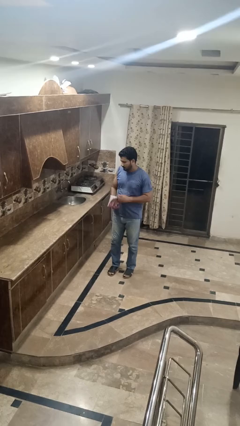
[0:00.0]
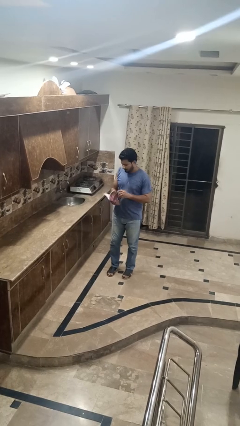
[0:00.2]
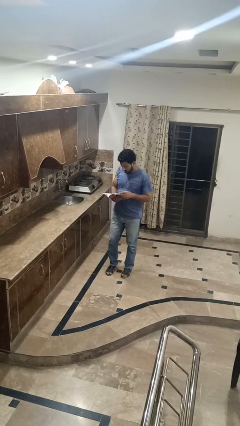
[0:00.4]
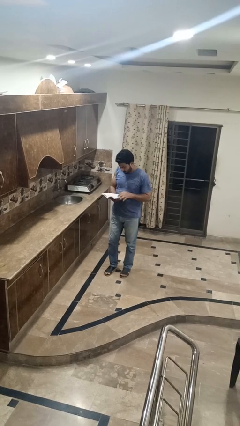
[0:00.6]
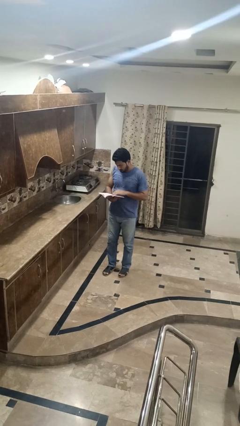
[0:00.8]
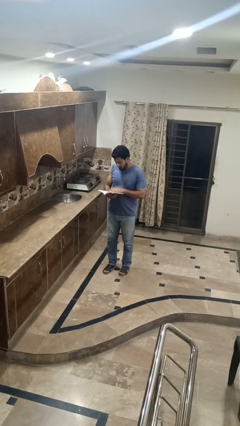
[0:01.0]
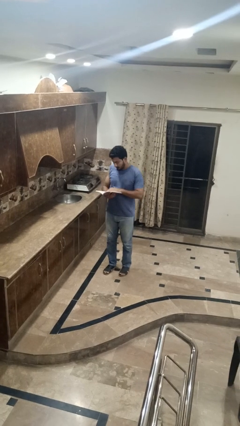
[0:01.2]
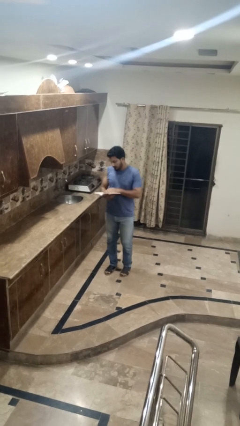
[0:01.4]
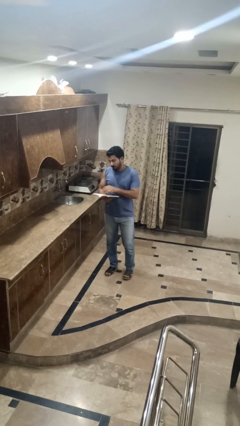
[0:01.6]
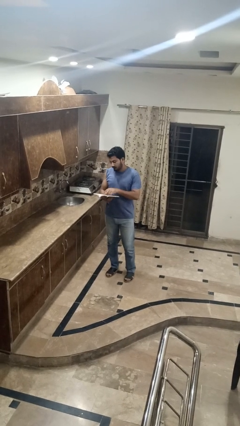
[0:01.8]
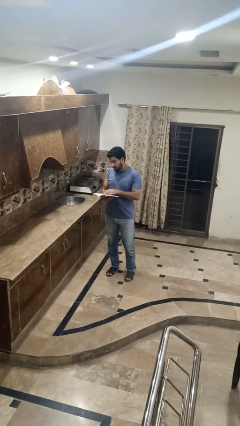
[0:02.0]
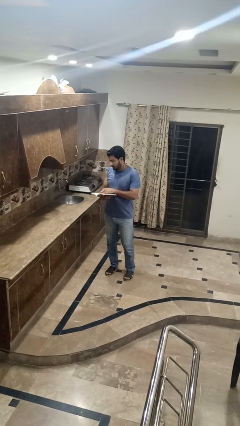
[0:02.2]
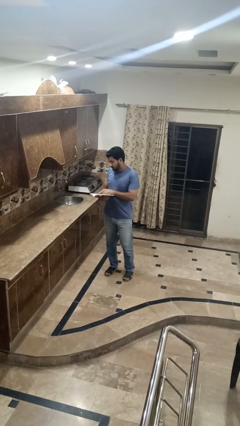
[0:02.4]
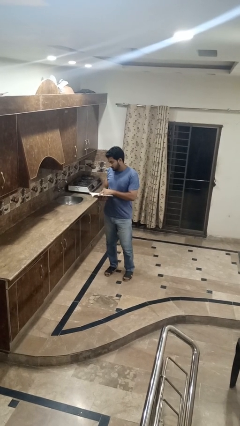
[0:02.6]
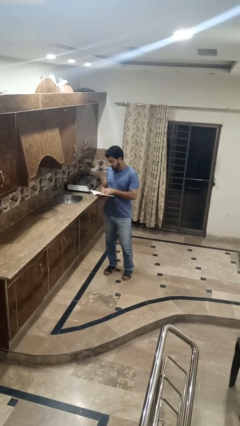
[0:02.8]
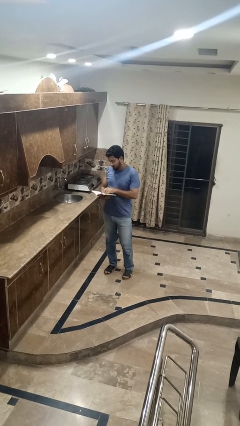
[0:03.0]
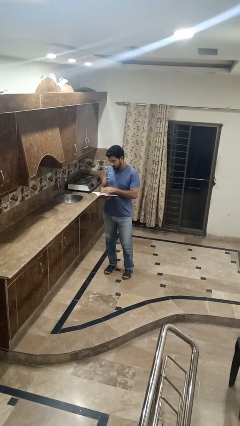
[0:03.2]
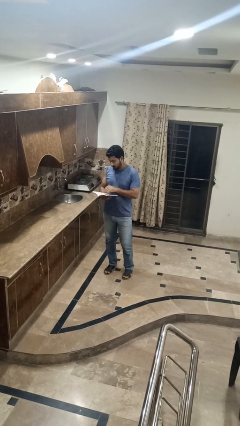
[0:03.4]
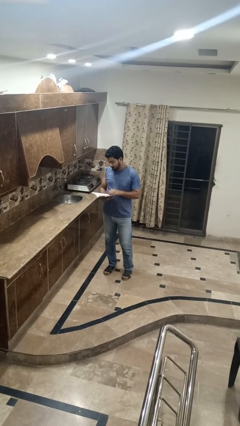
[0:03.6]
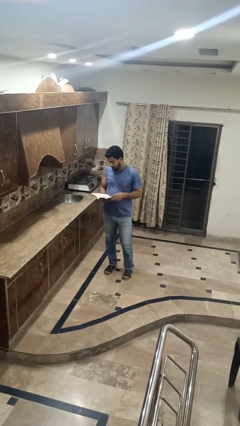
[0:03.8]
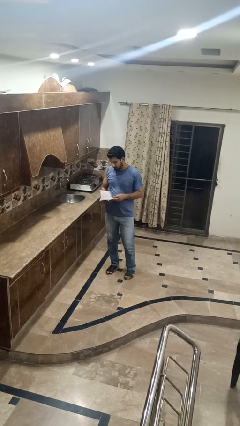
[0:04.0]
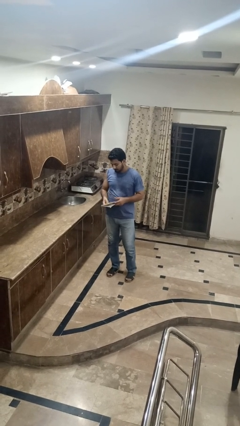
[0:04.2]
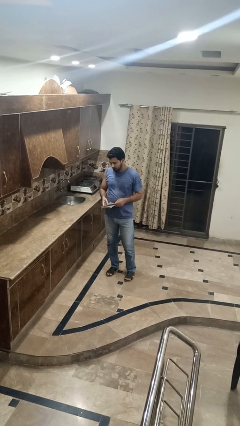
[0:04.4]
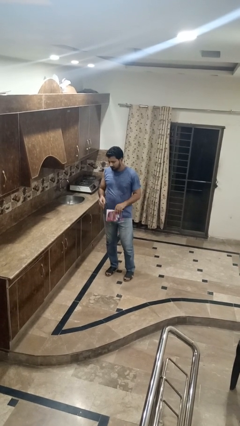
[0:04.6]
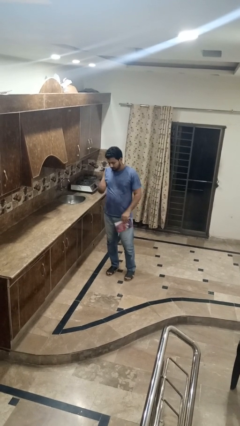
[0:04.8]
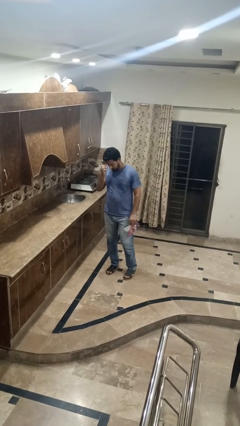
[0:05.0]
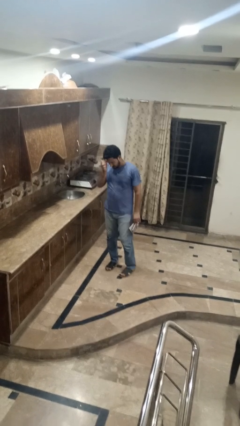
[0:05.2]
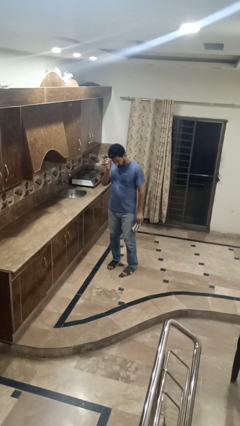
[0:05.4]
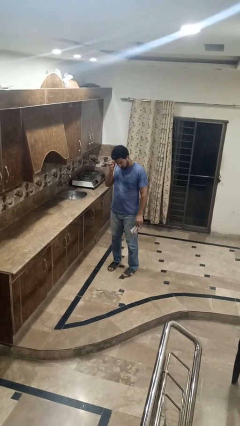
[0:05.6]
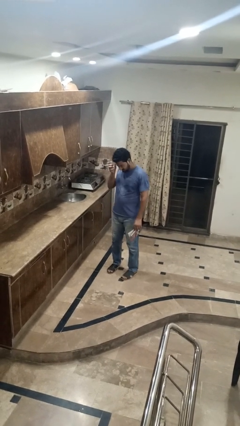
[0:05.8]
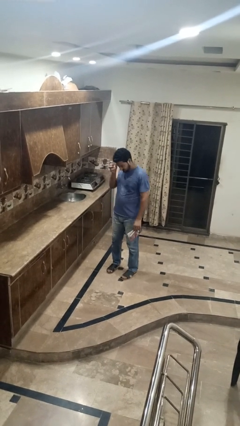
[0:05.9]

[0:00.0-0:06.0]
person reads book

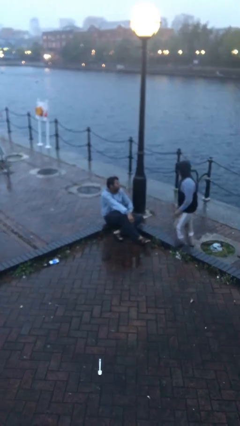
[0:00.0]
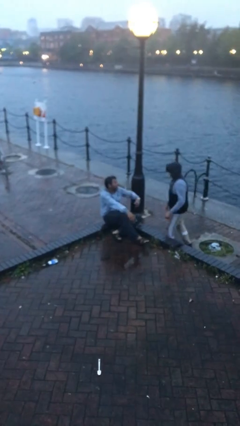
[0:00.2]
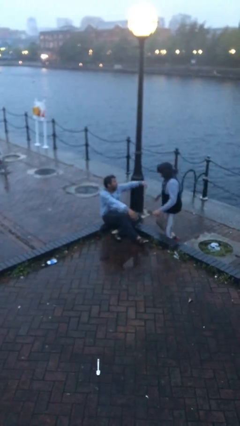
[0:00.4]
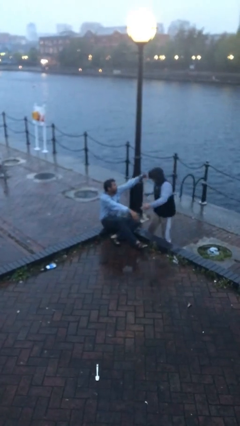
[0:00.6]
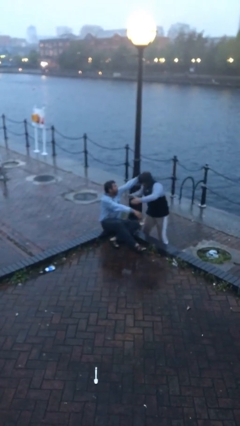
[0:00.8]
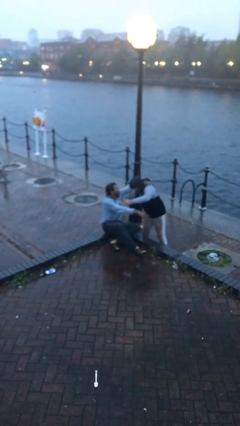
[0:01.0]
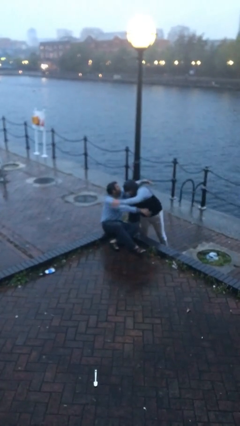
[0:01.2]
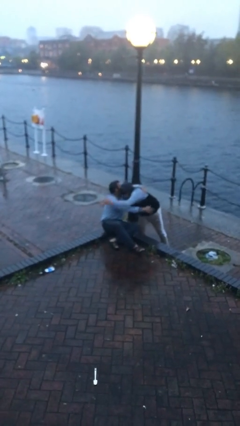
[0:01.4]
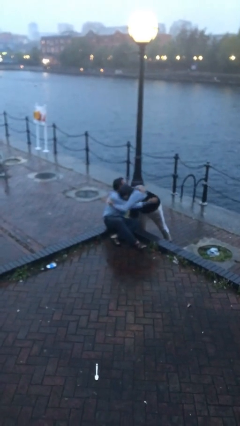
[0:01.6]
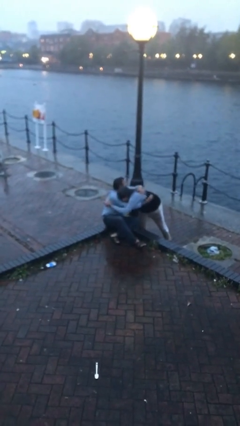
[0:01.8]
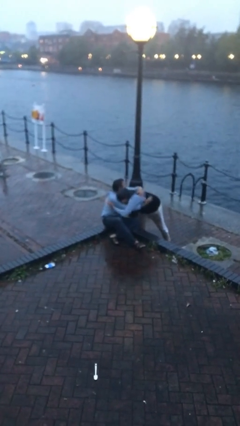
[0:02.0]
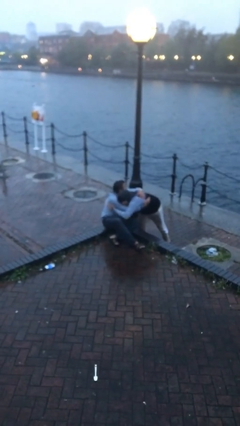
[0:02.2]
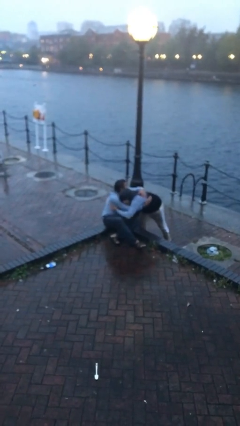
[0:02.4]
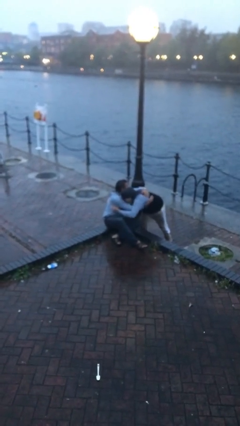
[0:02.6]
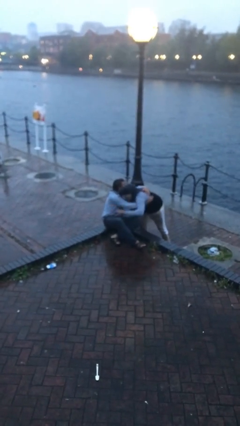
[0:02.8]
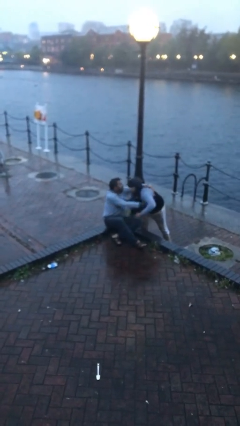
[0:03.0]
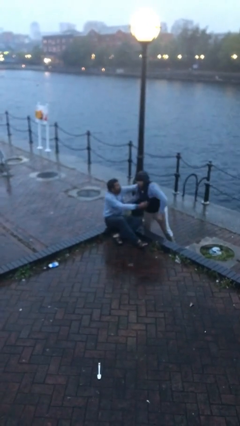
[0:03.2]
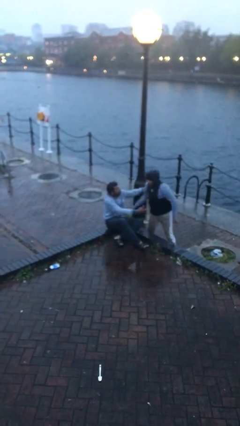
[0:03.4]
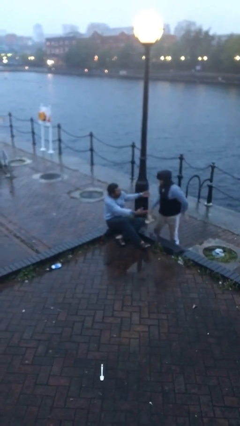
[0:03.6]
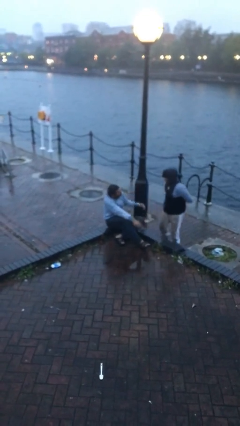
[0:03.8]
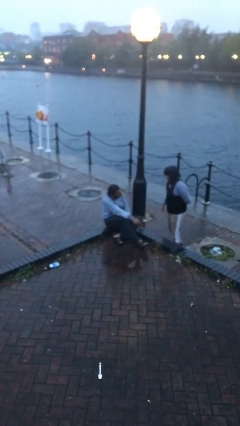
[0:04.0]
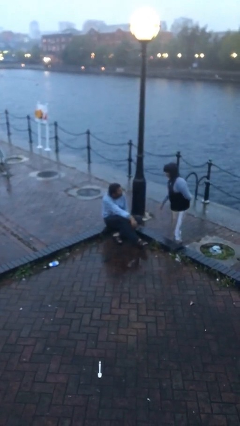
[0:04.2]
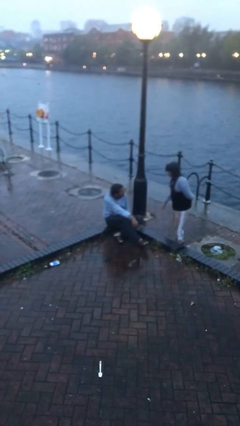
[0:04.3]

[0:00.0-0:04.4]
person embraces person

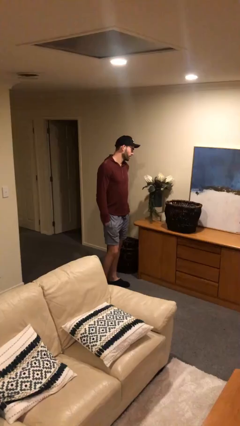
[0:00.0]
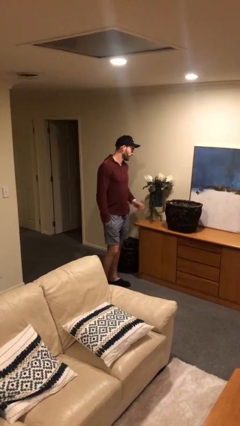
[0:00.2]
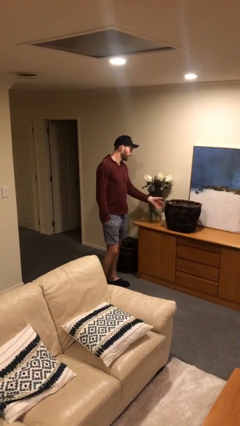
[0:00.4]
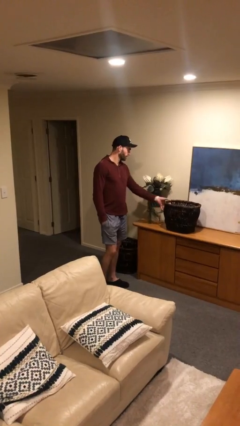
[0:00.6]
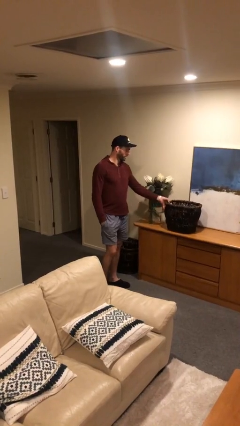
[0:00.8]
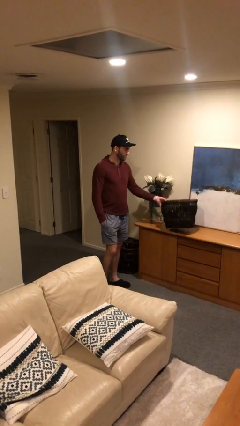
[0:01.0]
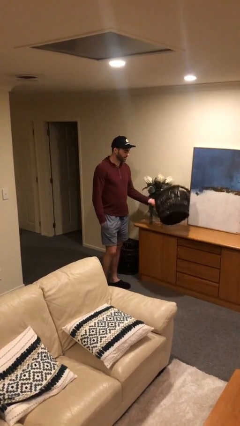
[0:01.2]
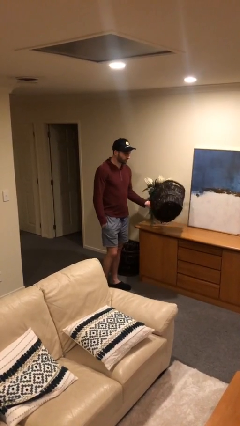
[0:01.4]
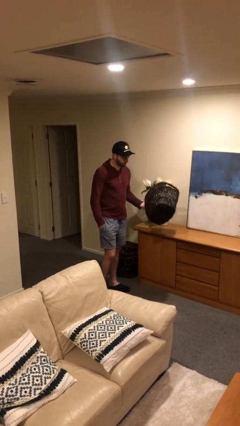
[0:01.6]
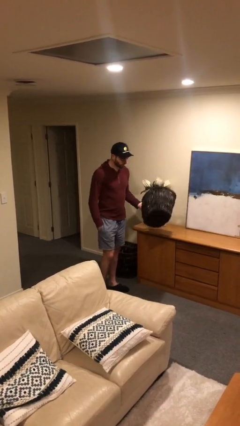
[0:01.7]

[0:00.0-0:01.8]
person picks up object from table

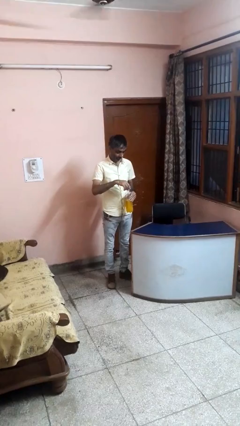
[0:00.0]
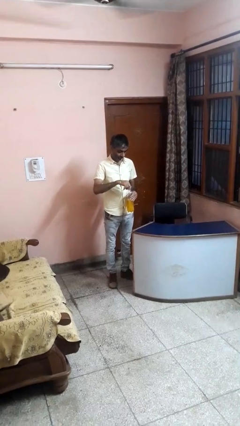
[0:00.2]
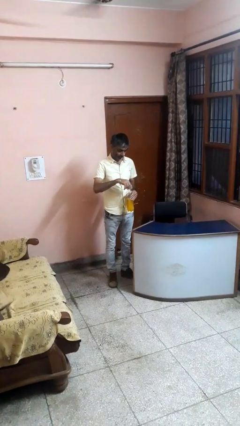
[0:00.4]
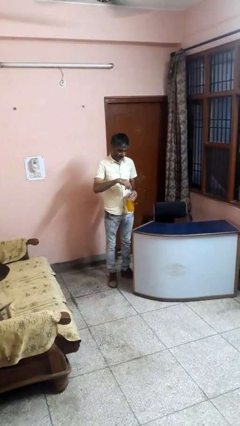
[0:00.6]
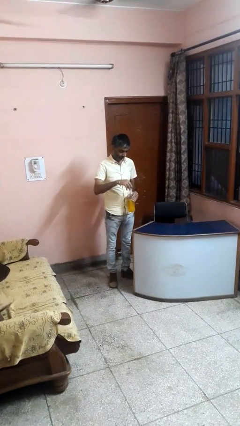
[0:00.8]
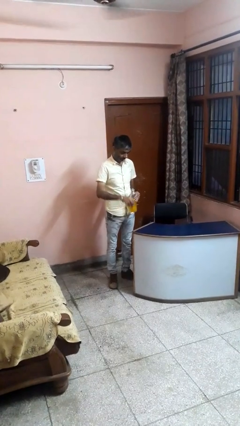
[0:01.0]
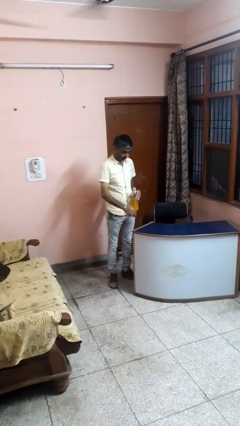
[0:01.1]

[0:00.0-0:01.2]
person unscrews lid from bottle

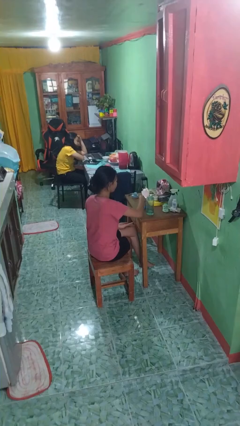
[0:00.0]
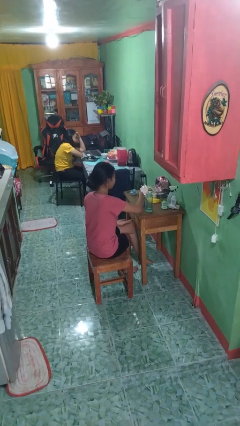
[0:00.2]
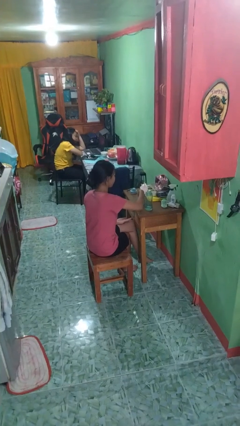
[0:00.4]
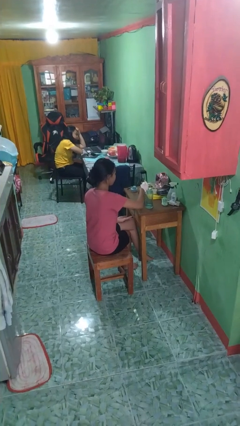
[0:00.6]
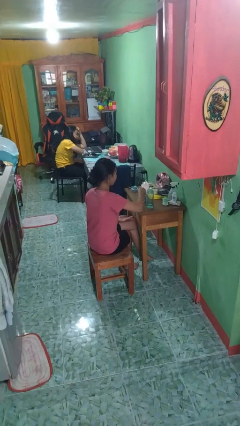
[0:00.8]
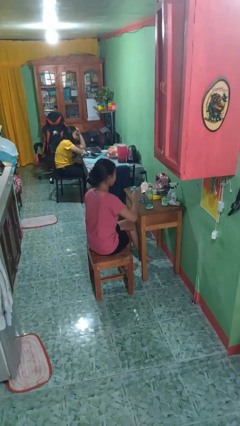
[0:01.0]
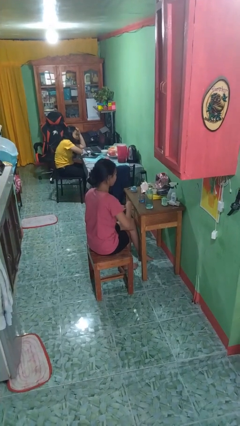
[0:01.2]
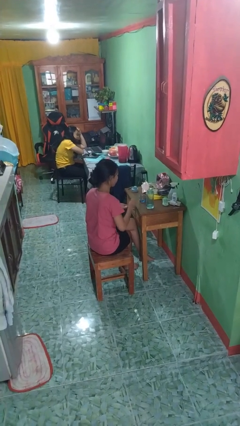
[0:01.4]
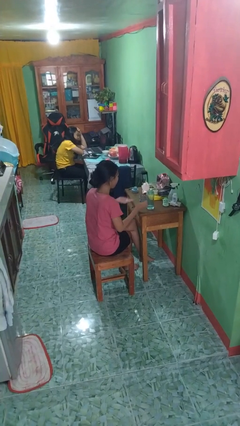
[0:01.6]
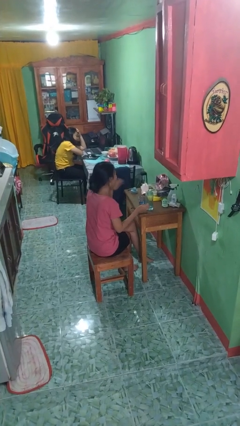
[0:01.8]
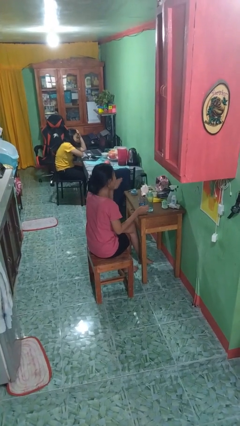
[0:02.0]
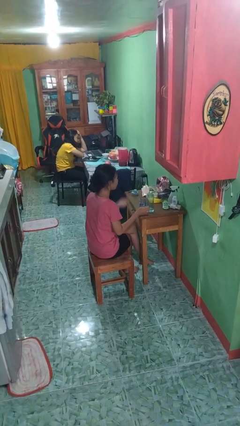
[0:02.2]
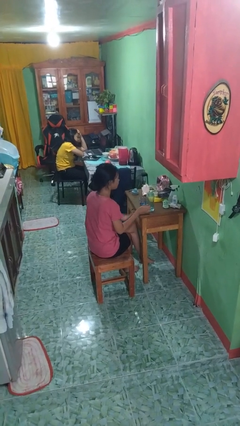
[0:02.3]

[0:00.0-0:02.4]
person takes medicine pills

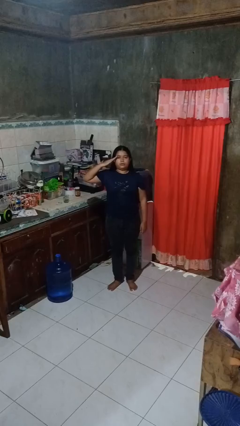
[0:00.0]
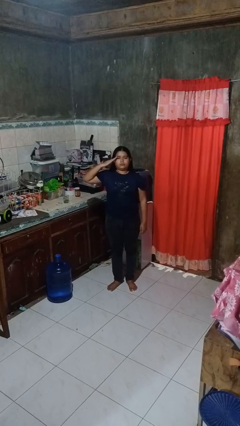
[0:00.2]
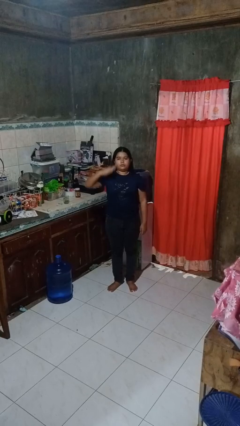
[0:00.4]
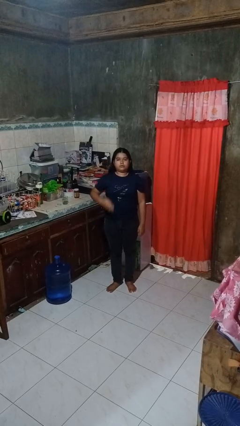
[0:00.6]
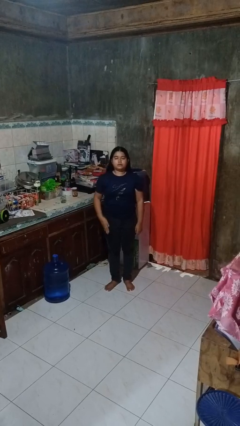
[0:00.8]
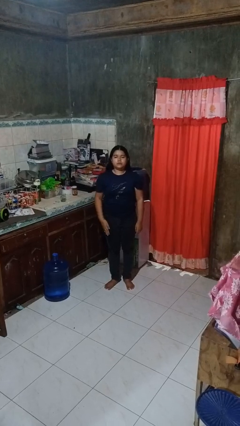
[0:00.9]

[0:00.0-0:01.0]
person salutes

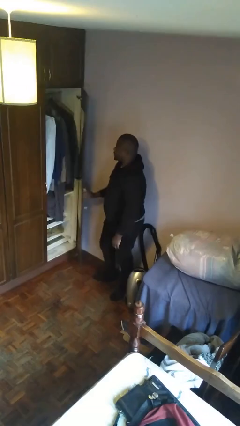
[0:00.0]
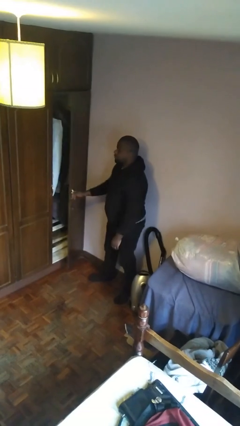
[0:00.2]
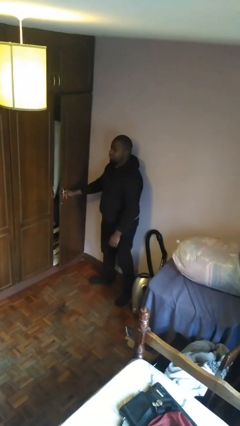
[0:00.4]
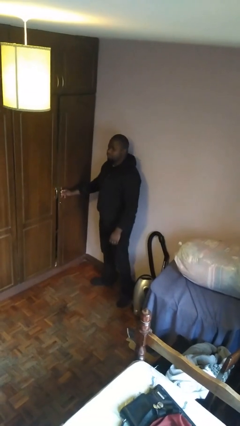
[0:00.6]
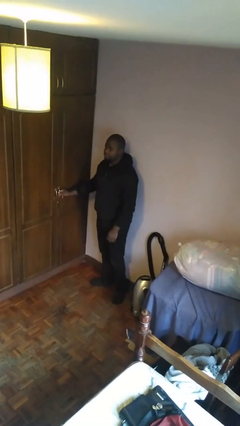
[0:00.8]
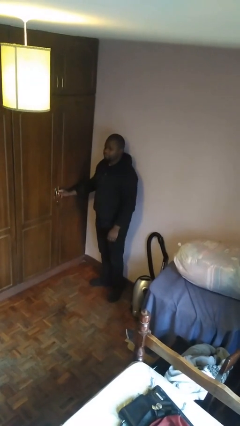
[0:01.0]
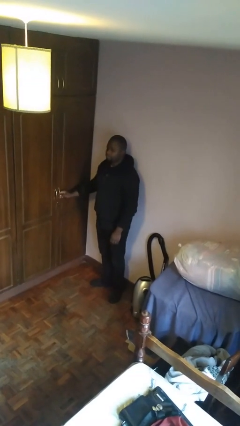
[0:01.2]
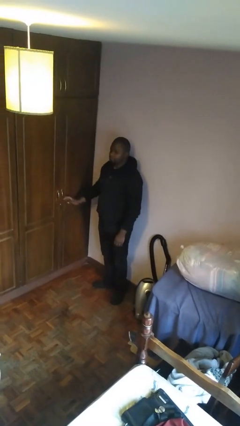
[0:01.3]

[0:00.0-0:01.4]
person closes closet door
